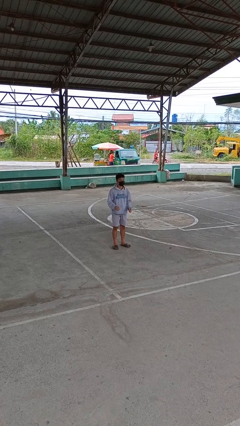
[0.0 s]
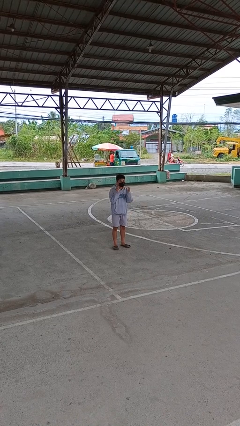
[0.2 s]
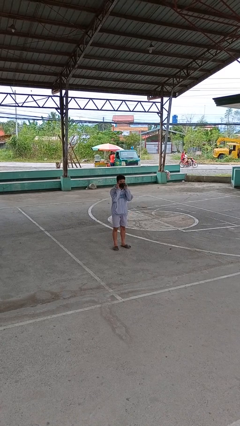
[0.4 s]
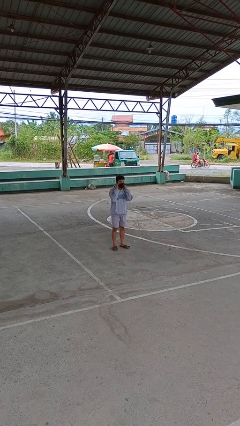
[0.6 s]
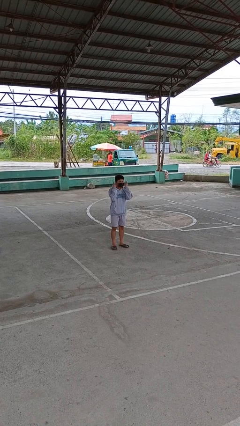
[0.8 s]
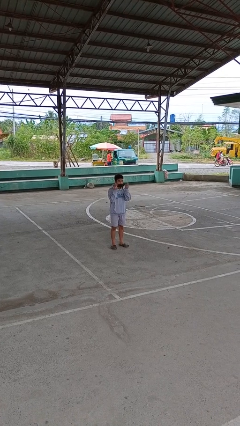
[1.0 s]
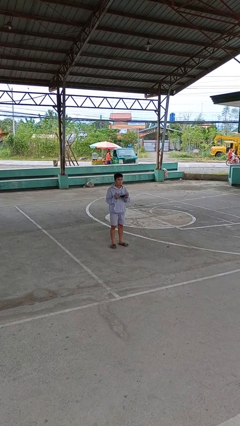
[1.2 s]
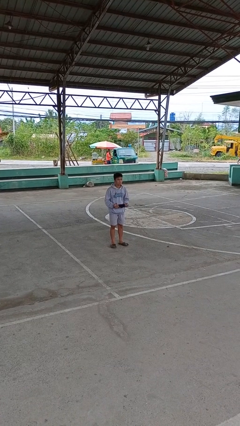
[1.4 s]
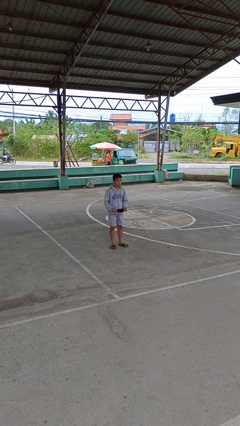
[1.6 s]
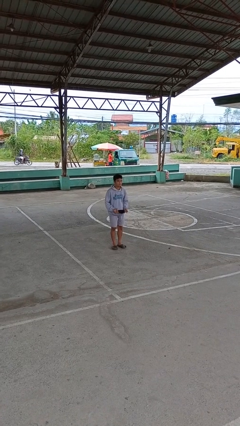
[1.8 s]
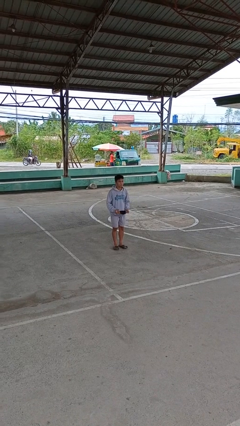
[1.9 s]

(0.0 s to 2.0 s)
person takes off facemask

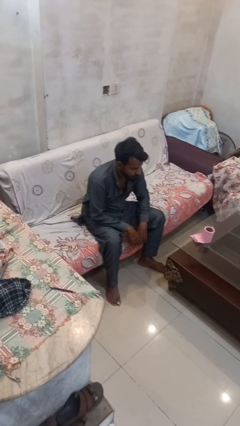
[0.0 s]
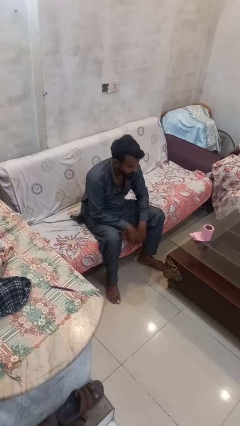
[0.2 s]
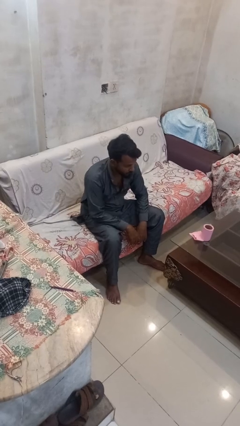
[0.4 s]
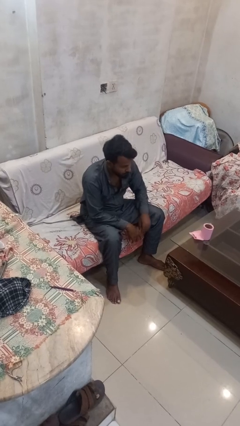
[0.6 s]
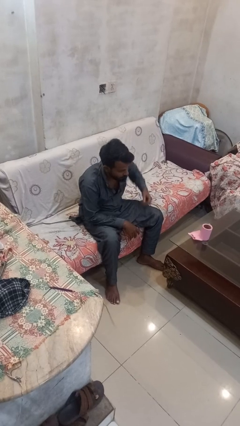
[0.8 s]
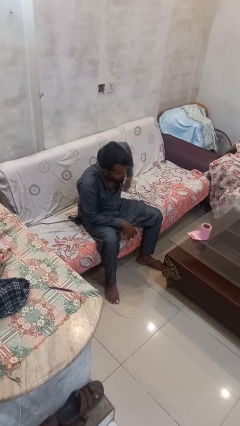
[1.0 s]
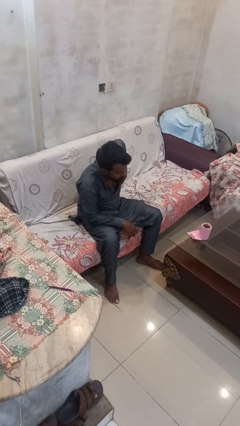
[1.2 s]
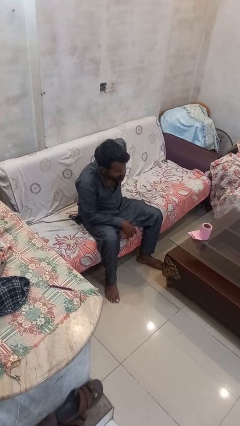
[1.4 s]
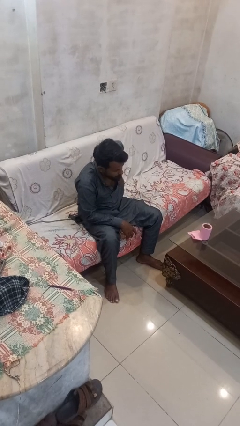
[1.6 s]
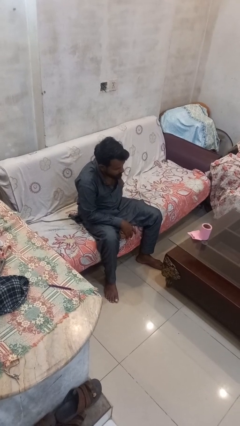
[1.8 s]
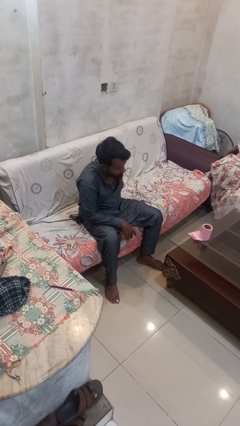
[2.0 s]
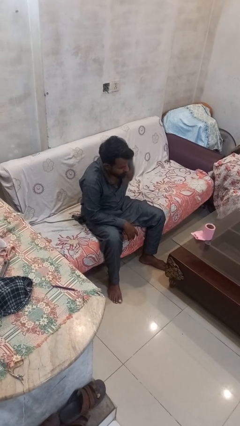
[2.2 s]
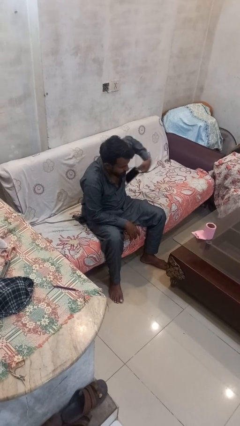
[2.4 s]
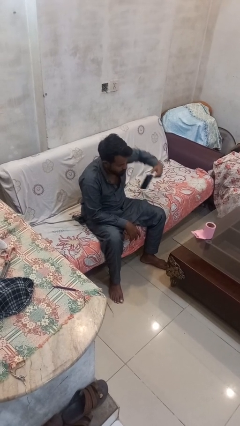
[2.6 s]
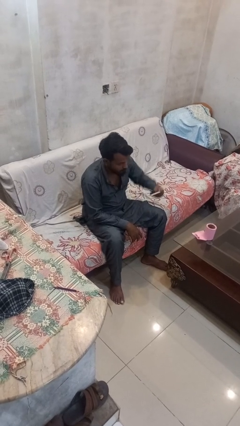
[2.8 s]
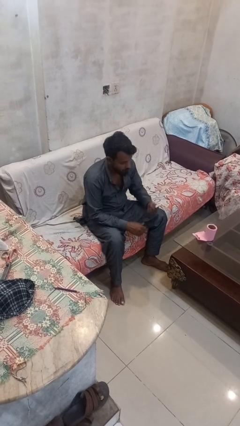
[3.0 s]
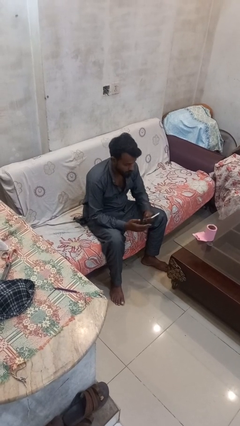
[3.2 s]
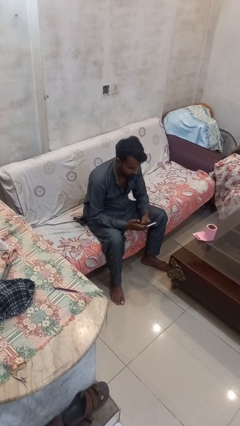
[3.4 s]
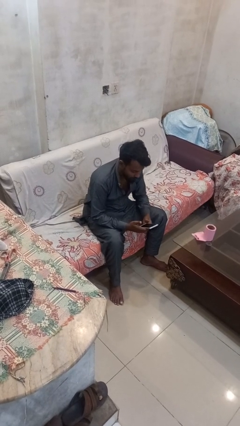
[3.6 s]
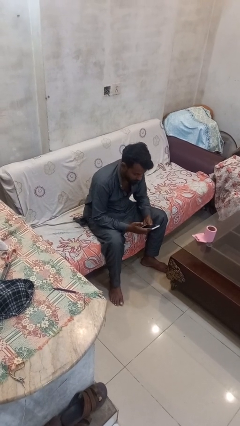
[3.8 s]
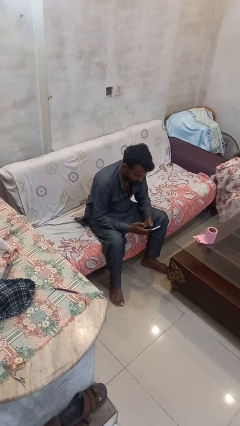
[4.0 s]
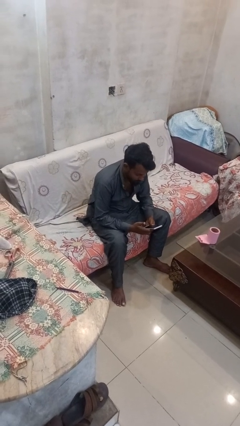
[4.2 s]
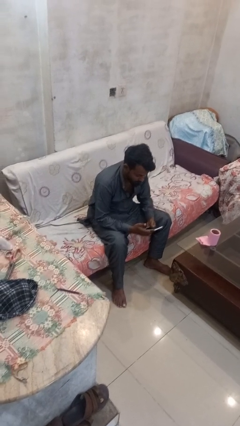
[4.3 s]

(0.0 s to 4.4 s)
person takes phone from pocket

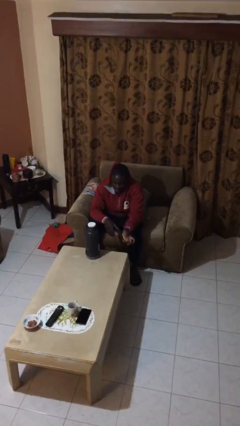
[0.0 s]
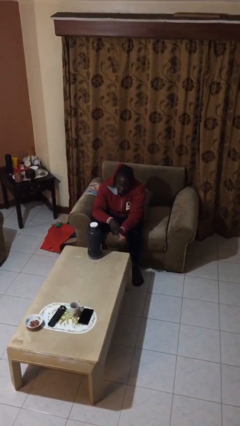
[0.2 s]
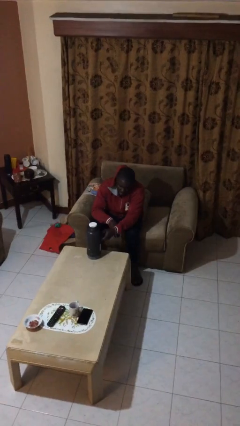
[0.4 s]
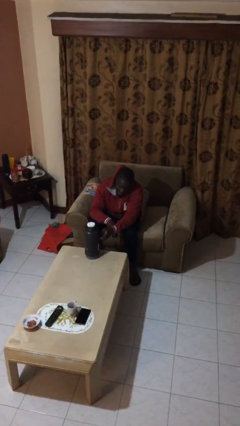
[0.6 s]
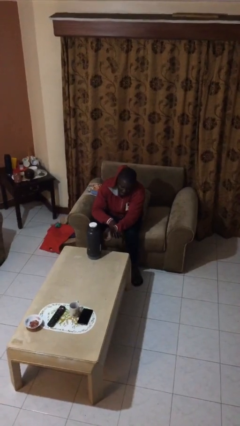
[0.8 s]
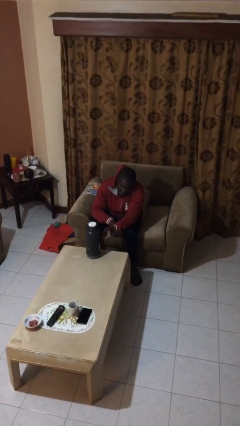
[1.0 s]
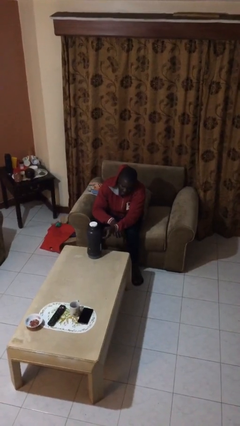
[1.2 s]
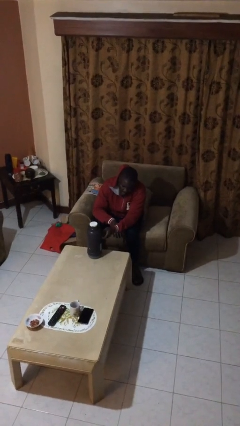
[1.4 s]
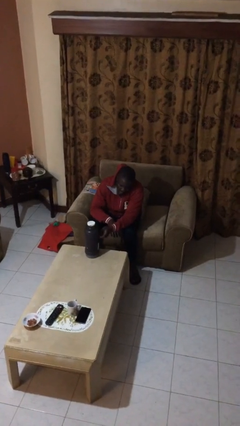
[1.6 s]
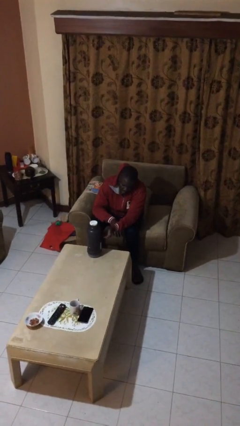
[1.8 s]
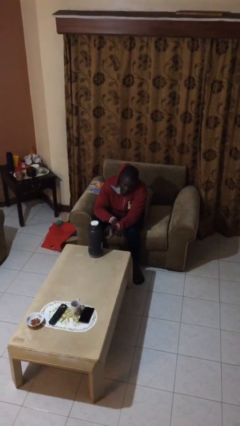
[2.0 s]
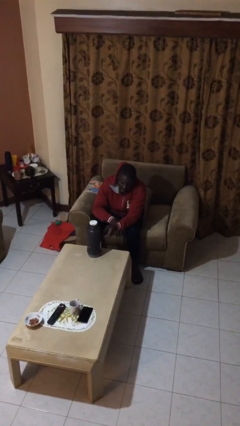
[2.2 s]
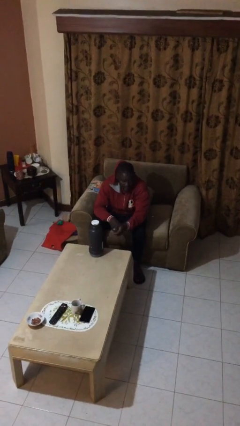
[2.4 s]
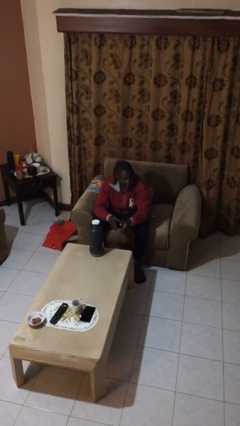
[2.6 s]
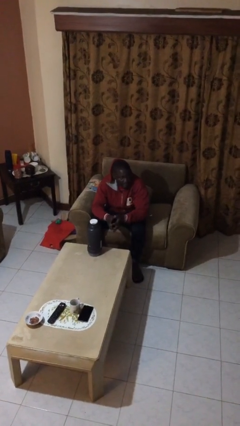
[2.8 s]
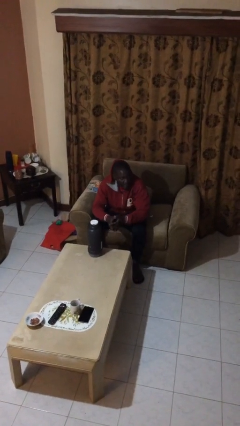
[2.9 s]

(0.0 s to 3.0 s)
person taps object with finger

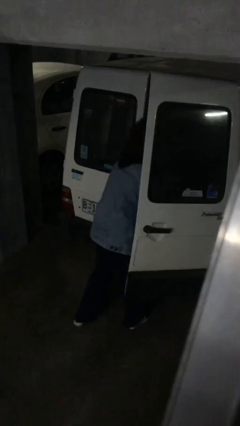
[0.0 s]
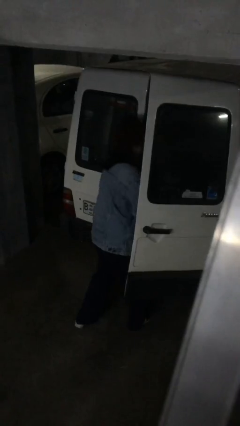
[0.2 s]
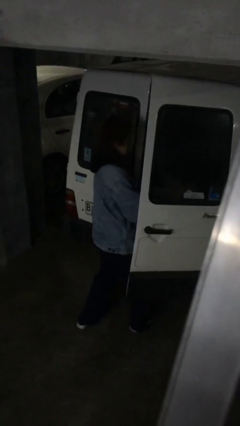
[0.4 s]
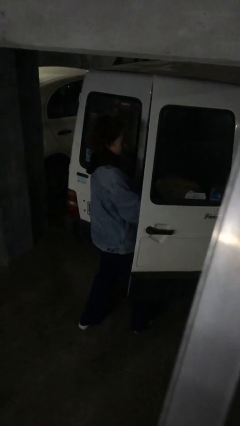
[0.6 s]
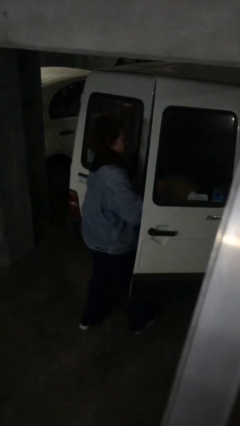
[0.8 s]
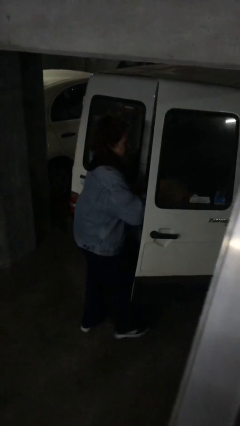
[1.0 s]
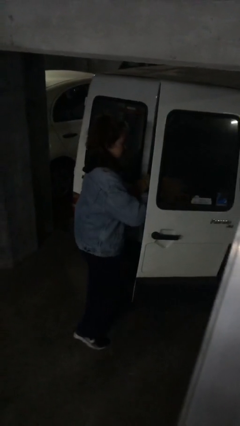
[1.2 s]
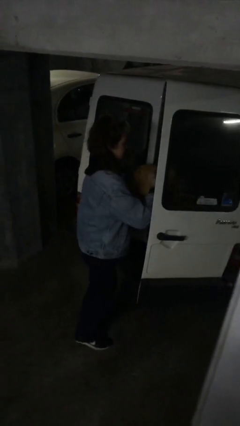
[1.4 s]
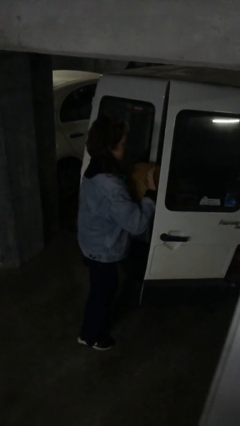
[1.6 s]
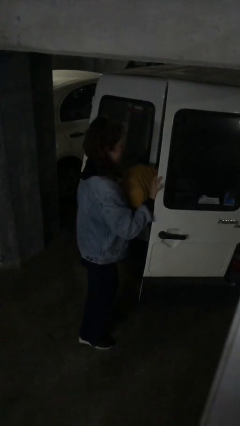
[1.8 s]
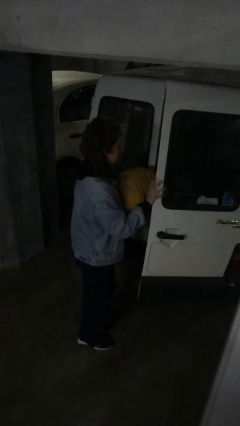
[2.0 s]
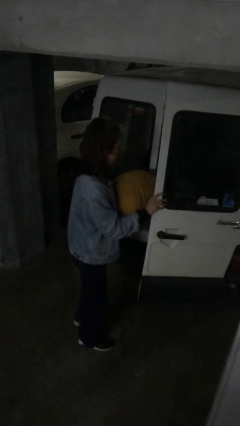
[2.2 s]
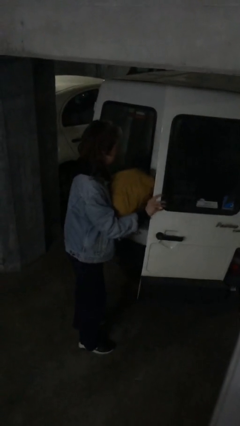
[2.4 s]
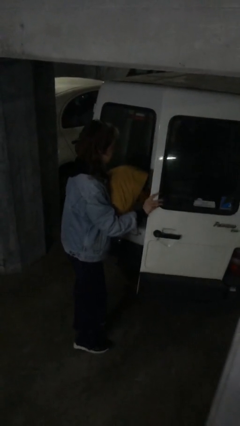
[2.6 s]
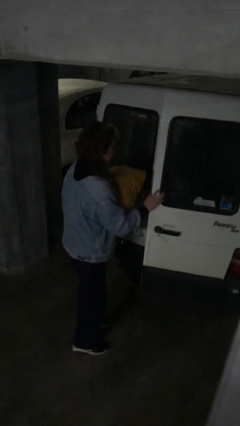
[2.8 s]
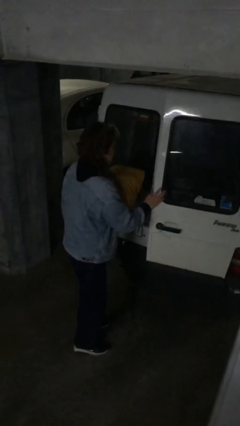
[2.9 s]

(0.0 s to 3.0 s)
person unloads car

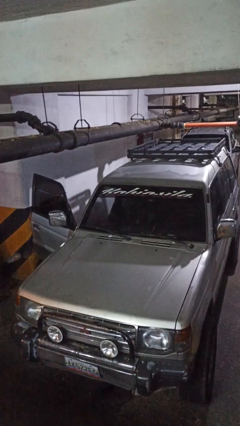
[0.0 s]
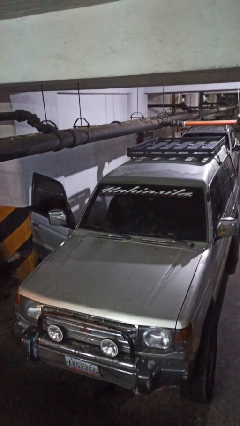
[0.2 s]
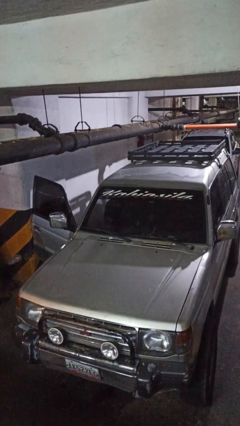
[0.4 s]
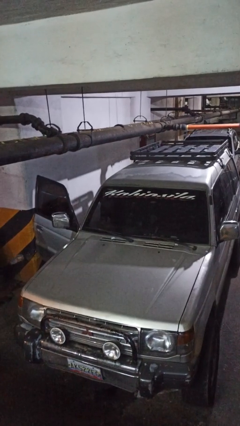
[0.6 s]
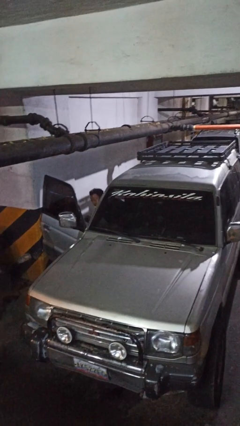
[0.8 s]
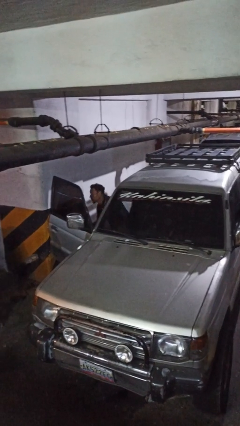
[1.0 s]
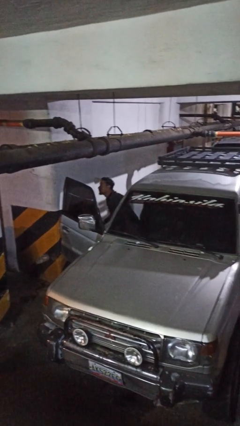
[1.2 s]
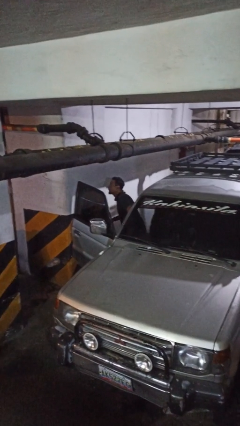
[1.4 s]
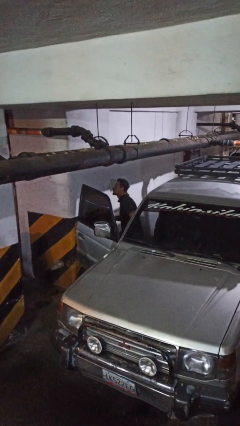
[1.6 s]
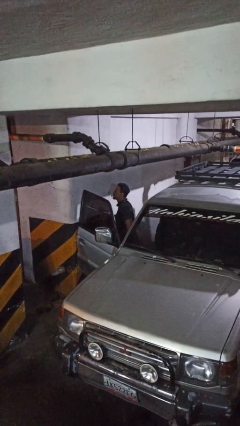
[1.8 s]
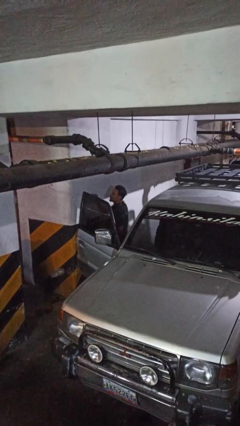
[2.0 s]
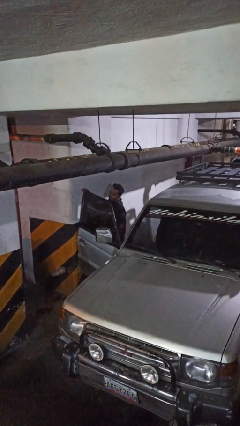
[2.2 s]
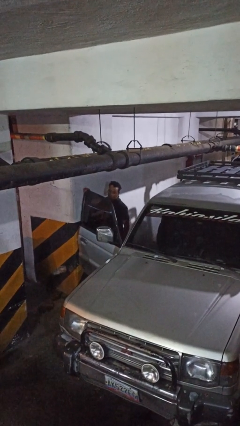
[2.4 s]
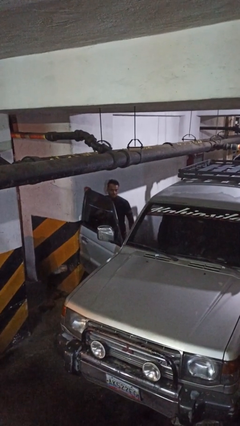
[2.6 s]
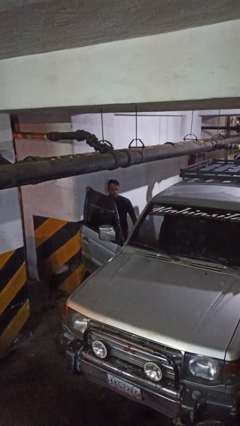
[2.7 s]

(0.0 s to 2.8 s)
person exits car

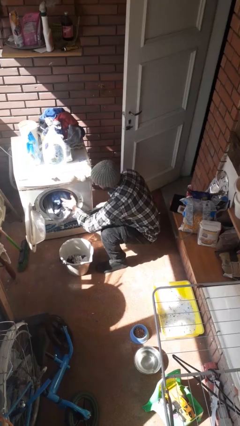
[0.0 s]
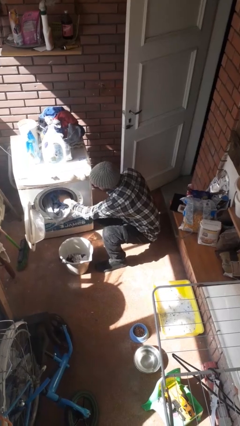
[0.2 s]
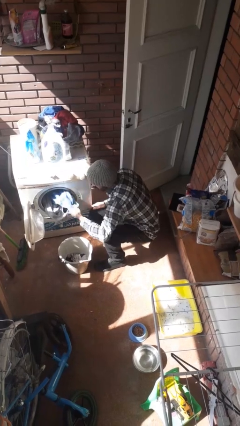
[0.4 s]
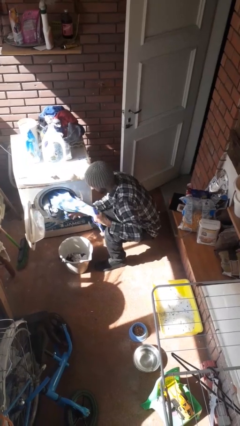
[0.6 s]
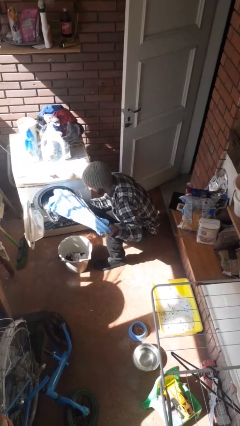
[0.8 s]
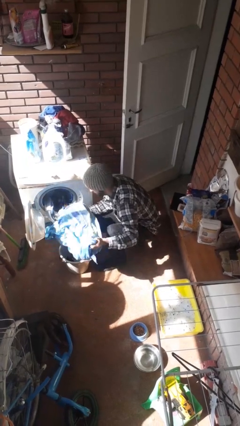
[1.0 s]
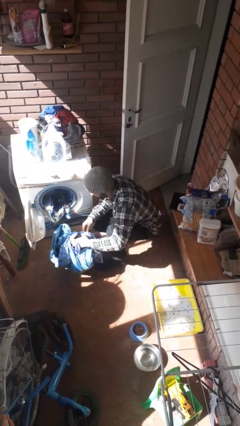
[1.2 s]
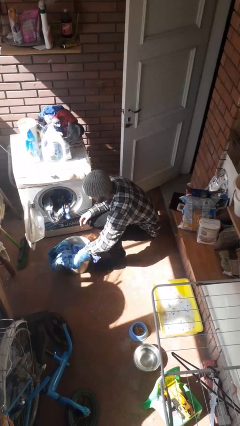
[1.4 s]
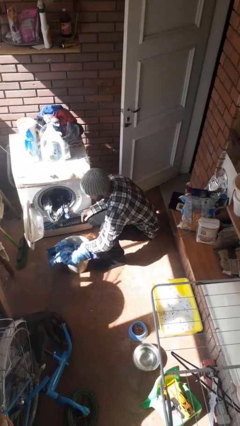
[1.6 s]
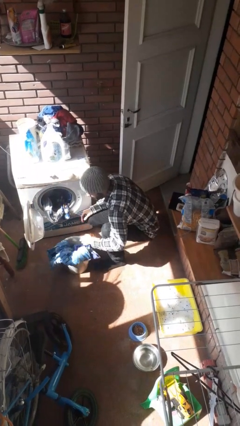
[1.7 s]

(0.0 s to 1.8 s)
person unloads clotheswasher

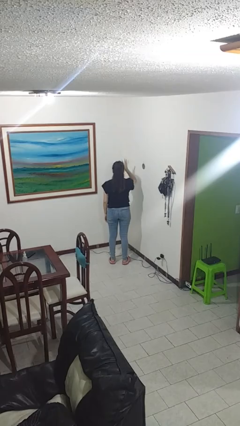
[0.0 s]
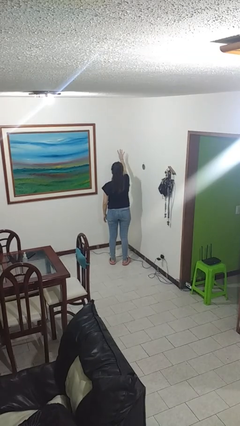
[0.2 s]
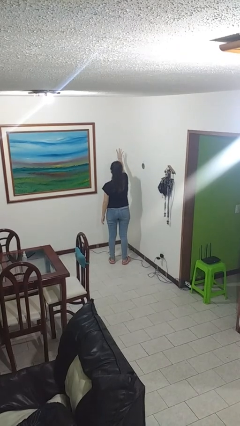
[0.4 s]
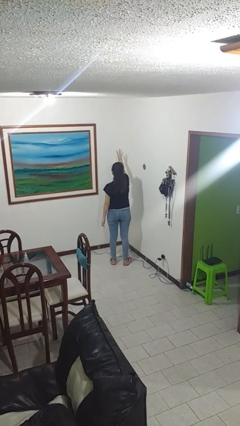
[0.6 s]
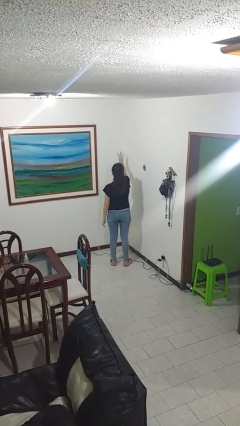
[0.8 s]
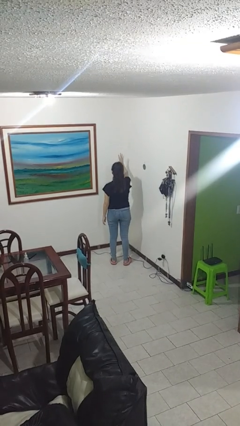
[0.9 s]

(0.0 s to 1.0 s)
person gestures number four
